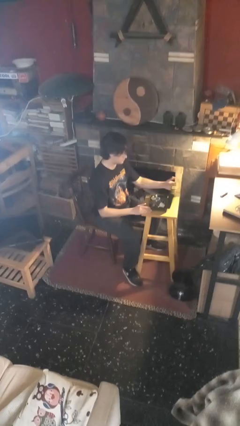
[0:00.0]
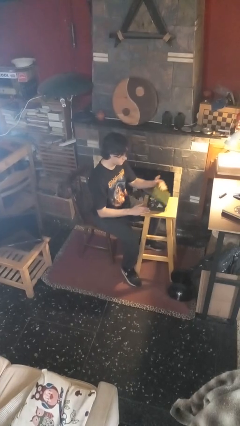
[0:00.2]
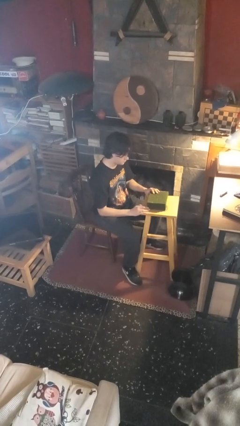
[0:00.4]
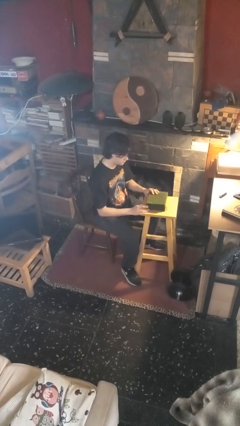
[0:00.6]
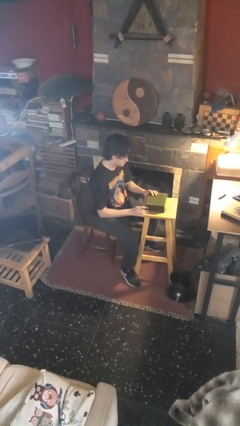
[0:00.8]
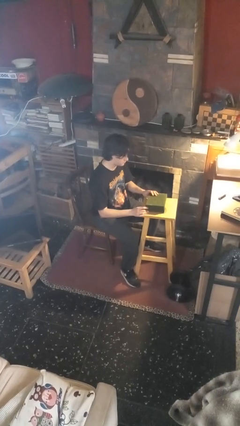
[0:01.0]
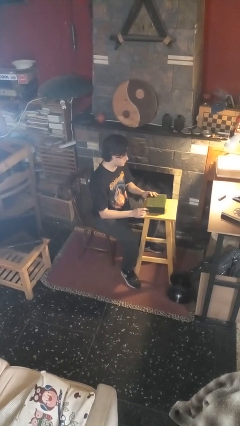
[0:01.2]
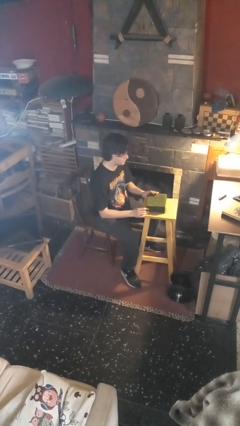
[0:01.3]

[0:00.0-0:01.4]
person closes jewelry box

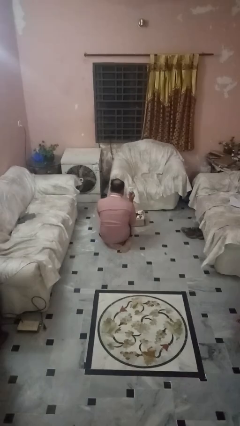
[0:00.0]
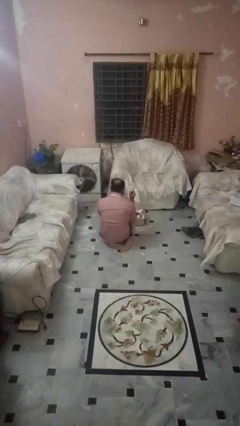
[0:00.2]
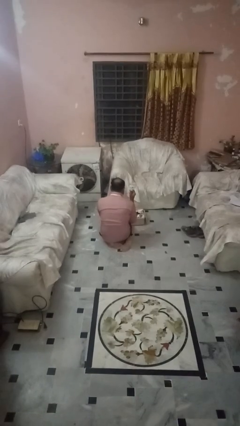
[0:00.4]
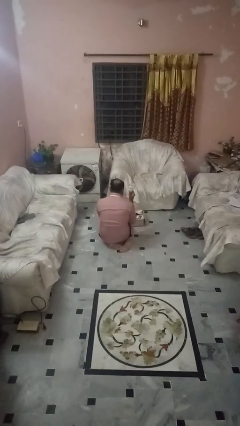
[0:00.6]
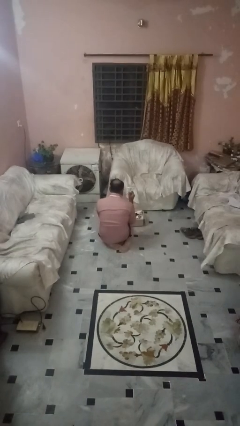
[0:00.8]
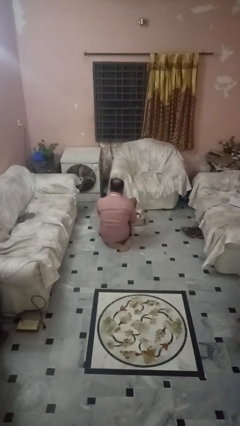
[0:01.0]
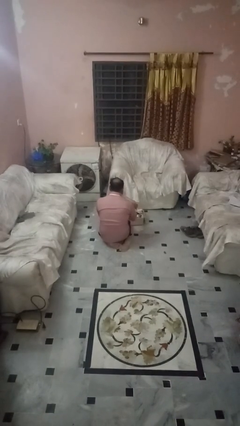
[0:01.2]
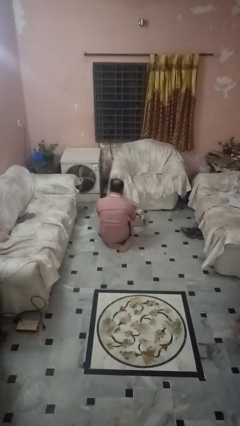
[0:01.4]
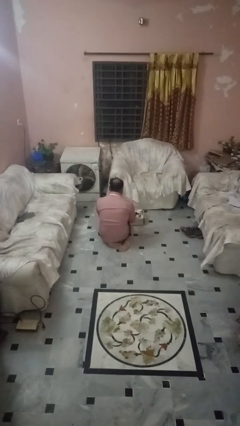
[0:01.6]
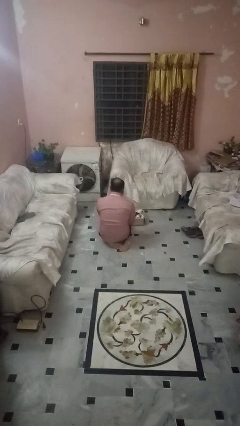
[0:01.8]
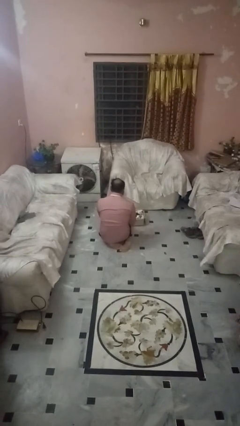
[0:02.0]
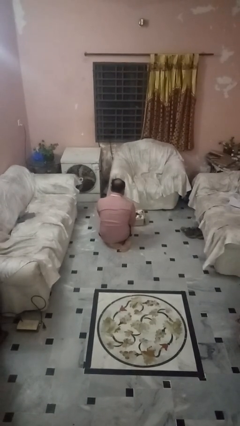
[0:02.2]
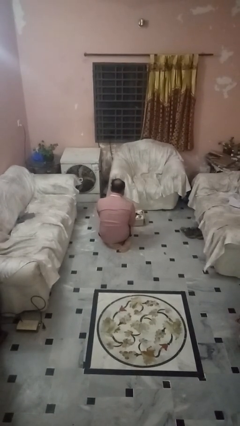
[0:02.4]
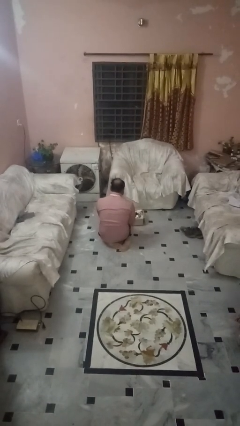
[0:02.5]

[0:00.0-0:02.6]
person puts object into box

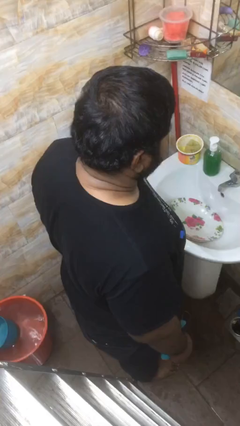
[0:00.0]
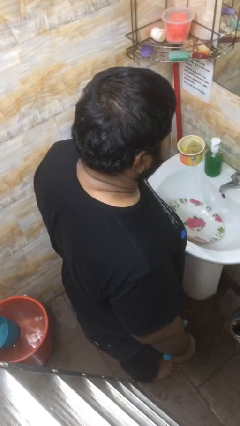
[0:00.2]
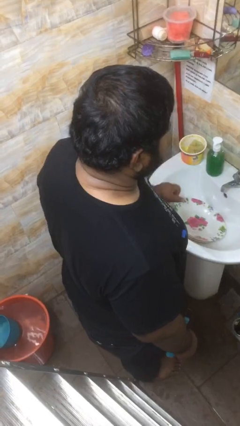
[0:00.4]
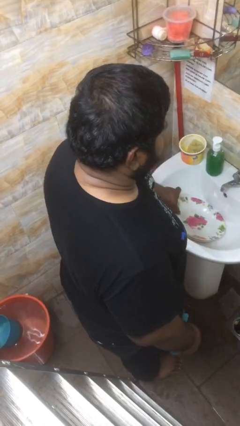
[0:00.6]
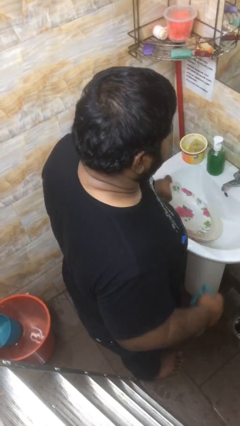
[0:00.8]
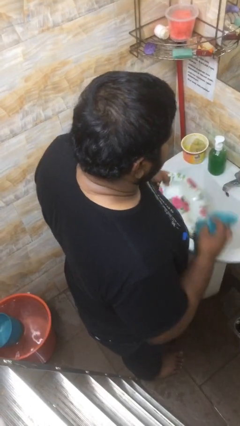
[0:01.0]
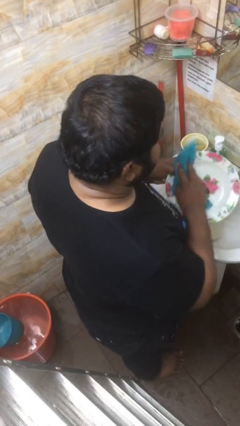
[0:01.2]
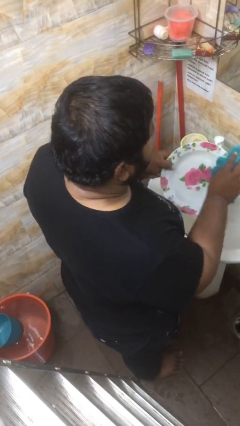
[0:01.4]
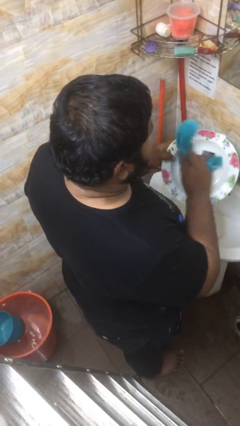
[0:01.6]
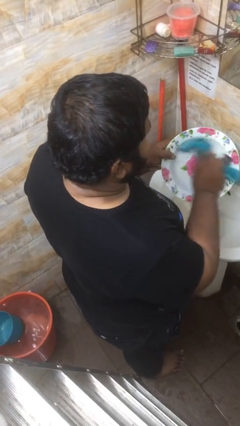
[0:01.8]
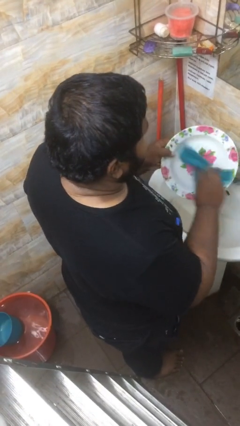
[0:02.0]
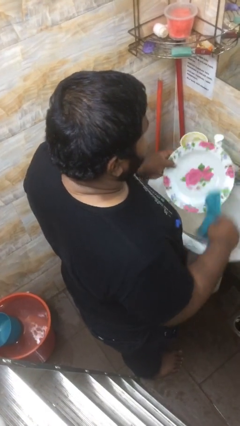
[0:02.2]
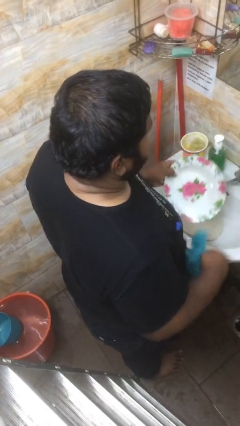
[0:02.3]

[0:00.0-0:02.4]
person dries dish

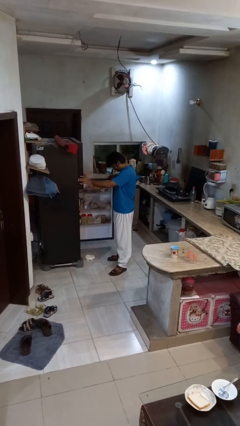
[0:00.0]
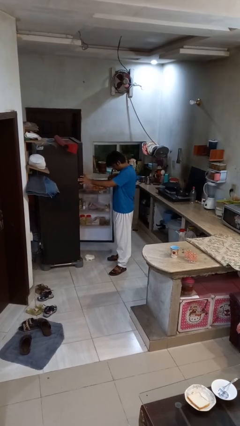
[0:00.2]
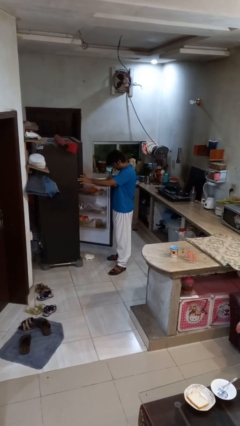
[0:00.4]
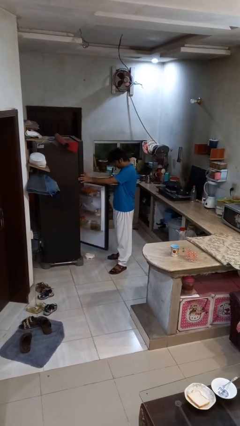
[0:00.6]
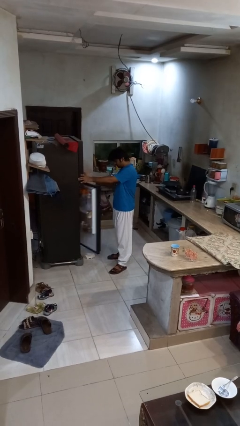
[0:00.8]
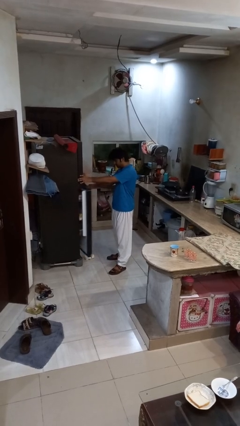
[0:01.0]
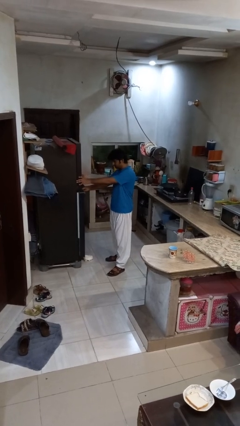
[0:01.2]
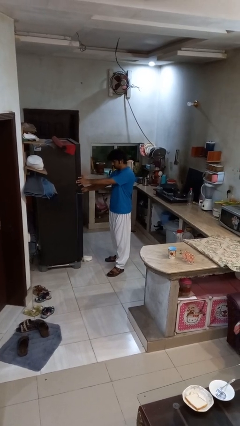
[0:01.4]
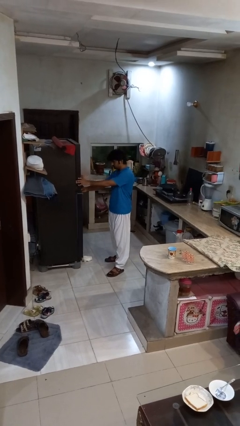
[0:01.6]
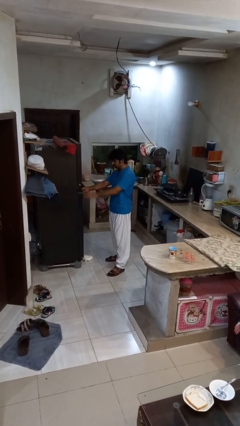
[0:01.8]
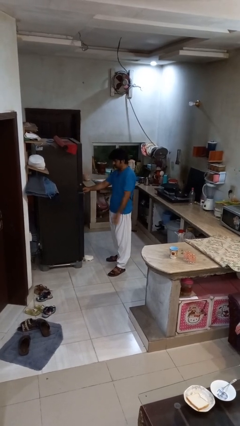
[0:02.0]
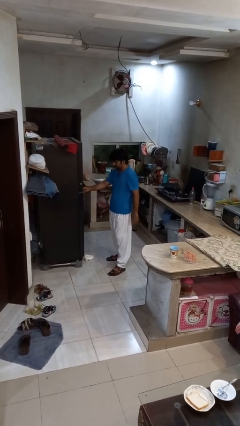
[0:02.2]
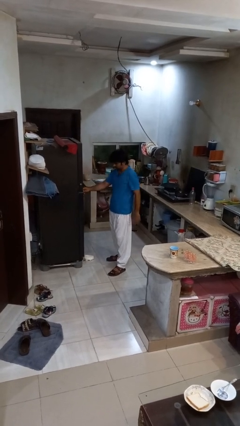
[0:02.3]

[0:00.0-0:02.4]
person closes refrigerator

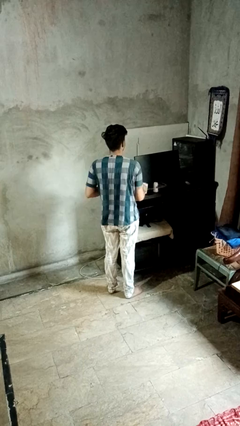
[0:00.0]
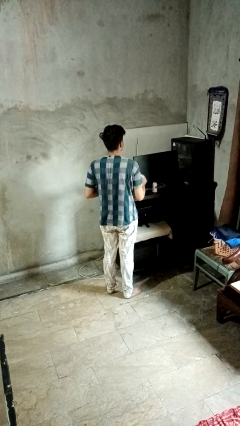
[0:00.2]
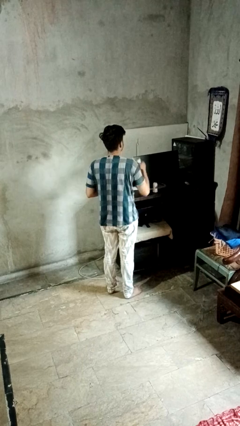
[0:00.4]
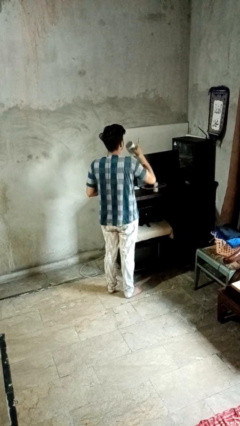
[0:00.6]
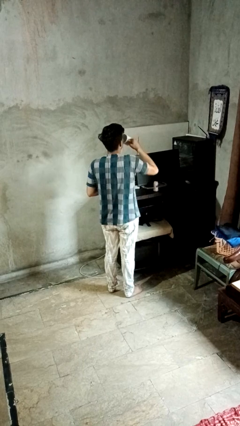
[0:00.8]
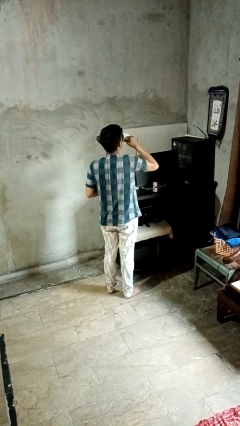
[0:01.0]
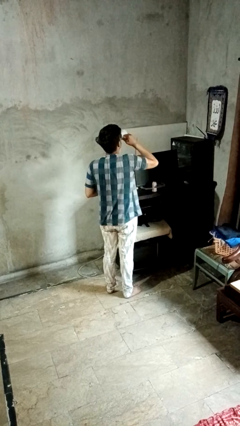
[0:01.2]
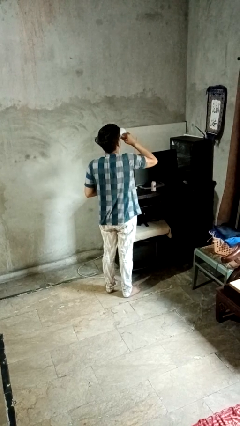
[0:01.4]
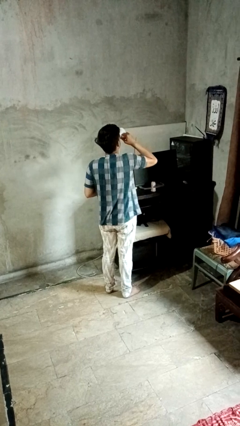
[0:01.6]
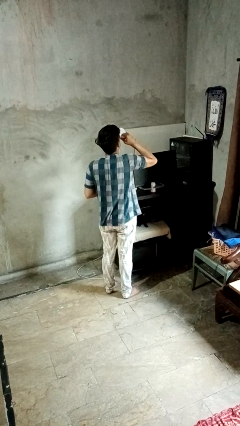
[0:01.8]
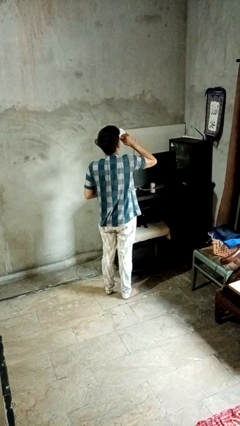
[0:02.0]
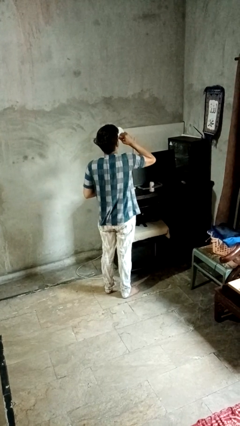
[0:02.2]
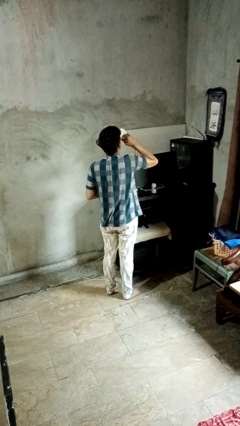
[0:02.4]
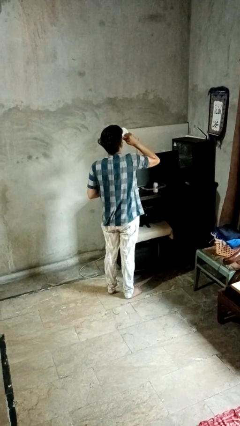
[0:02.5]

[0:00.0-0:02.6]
person drinks from cup

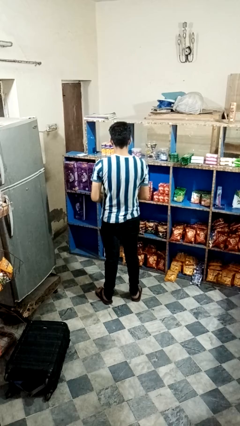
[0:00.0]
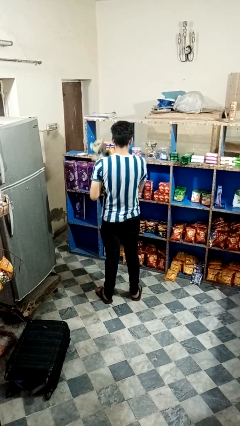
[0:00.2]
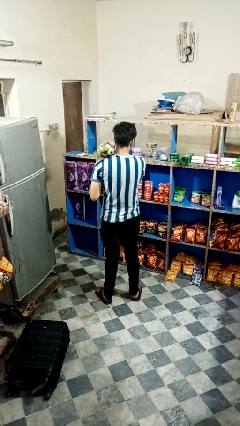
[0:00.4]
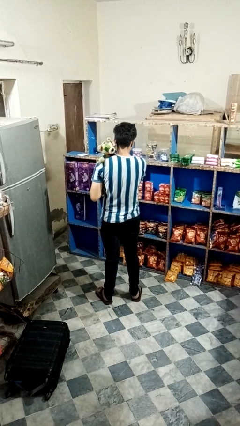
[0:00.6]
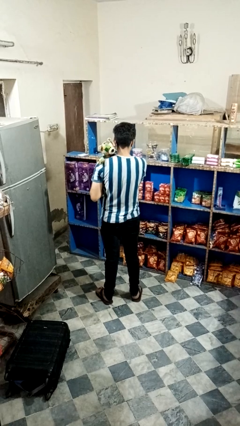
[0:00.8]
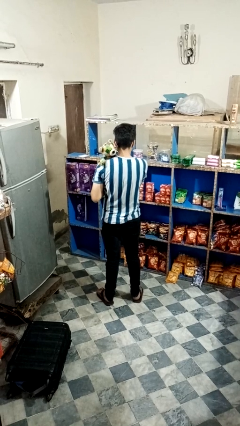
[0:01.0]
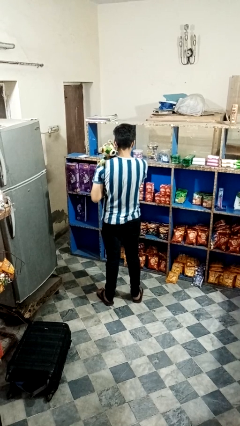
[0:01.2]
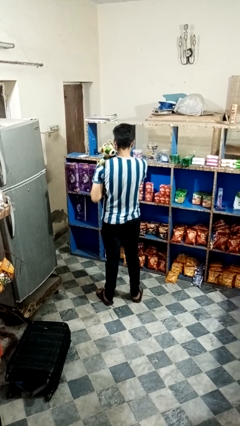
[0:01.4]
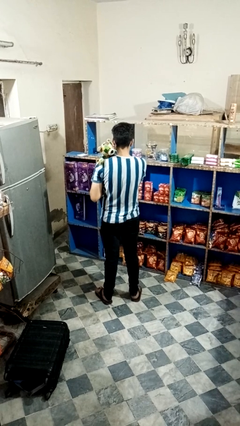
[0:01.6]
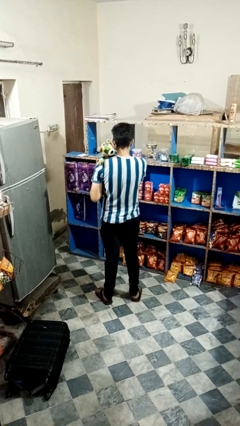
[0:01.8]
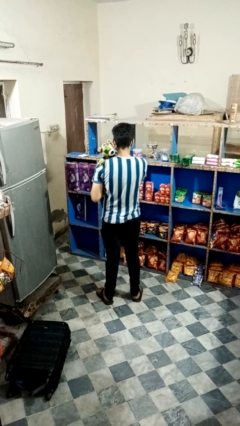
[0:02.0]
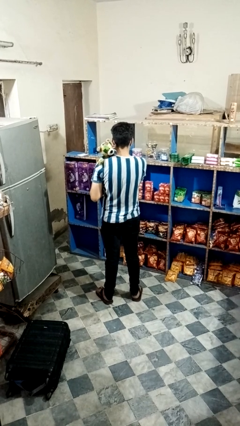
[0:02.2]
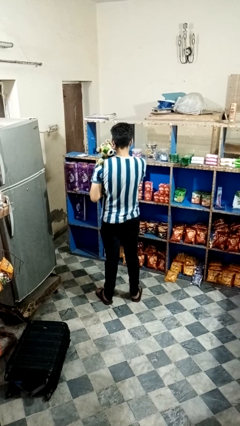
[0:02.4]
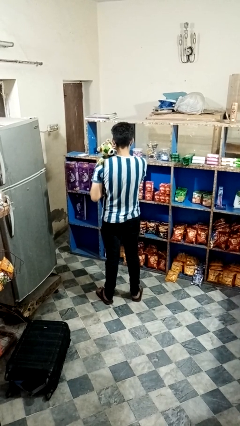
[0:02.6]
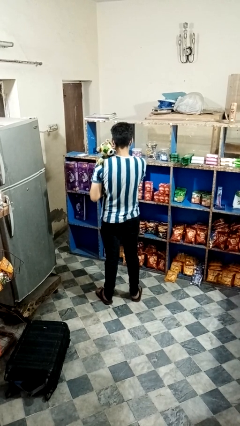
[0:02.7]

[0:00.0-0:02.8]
person hugs stuffed animal

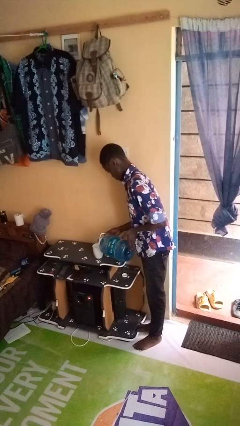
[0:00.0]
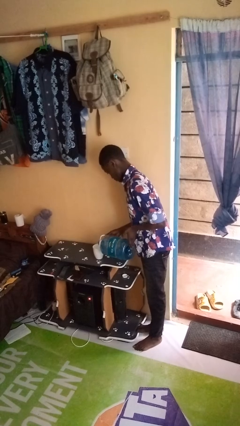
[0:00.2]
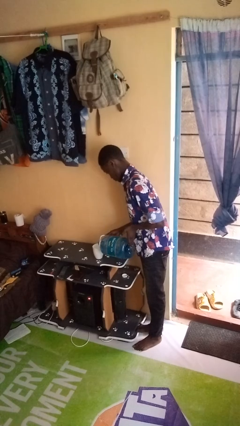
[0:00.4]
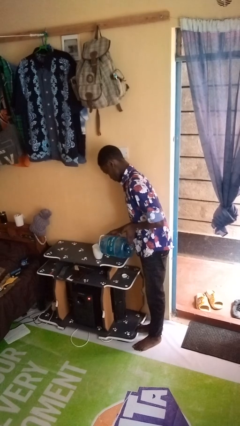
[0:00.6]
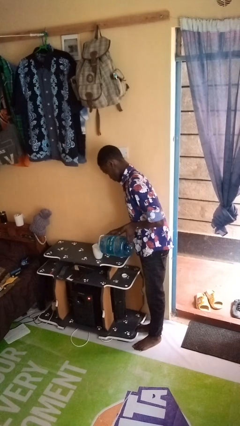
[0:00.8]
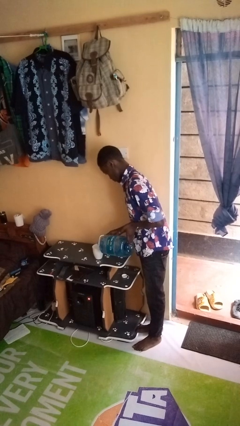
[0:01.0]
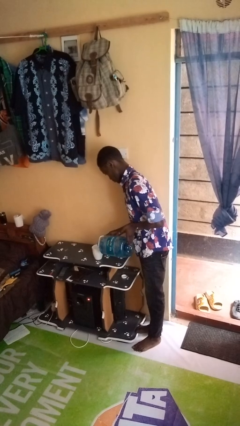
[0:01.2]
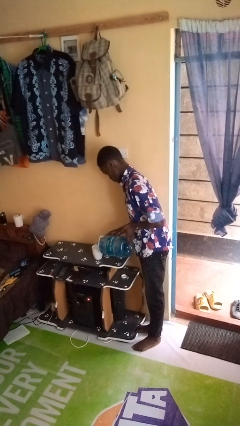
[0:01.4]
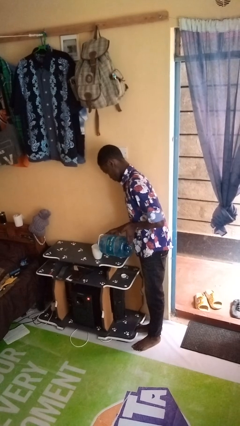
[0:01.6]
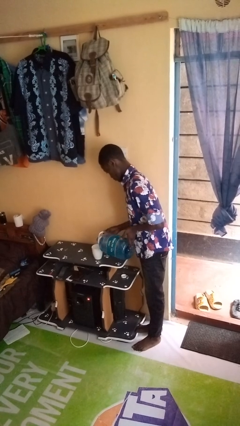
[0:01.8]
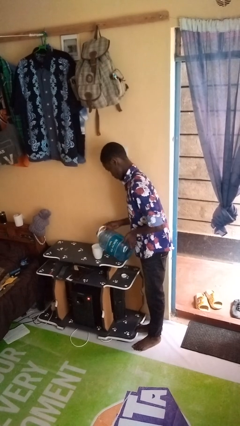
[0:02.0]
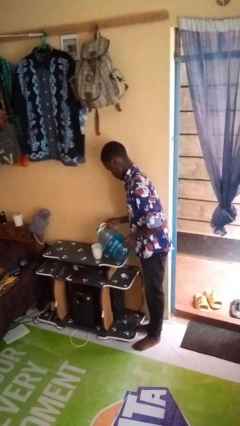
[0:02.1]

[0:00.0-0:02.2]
person pours liquid into cup

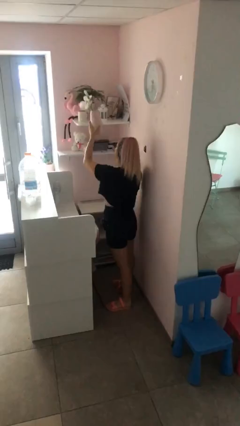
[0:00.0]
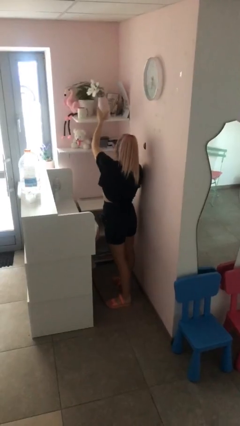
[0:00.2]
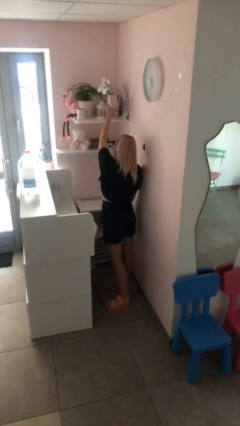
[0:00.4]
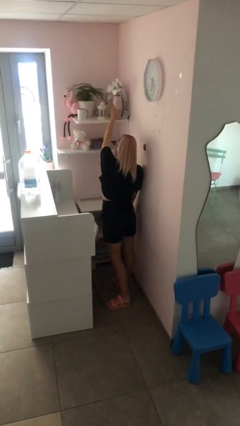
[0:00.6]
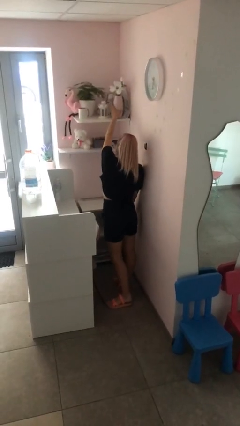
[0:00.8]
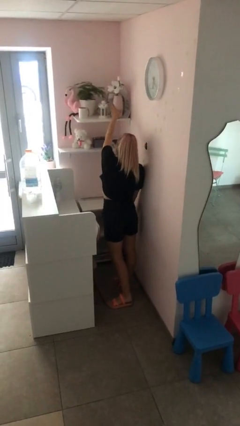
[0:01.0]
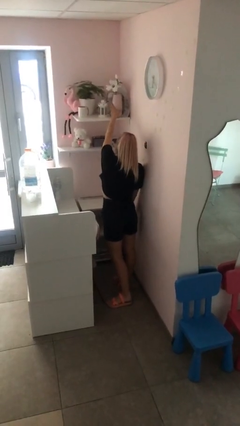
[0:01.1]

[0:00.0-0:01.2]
person puts down object into cabinet
